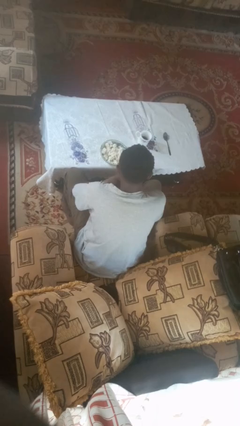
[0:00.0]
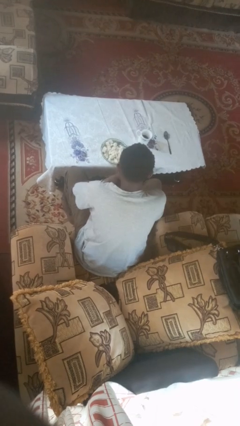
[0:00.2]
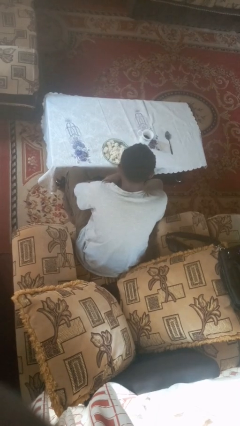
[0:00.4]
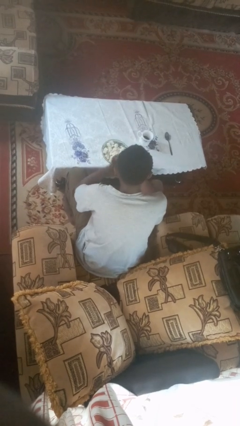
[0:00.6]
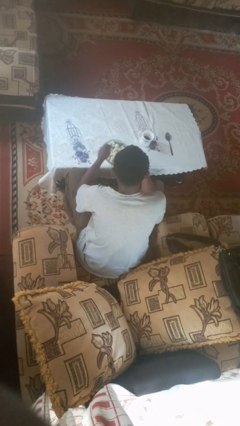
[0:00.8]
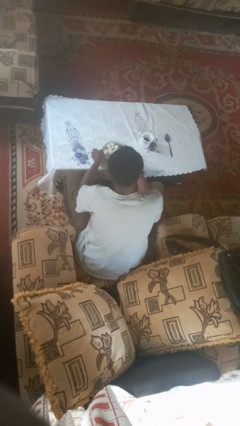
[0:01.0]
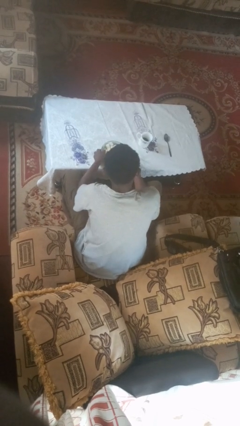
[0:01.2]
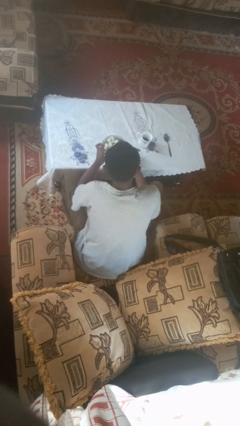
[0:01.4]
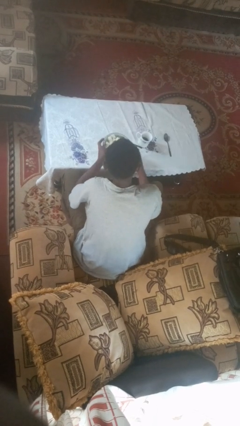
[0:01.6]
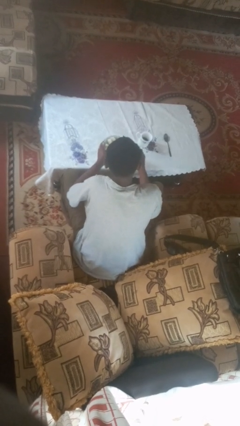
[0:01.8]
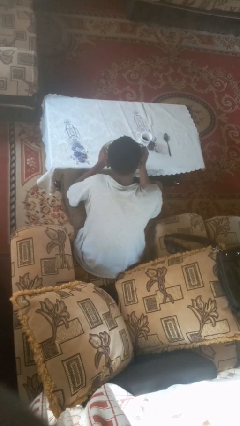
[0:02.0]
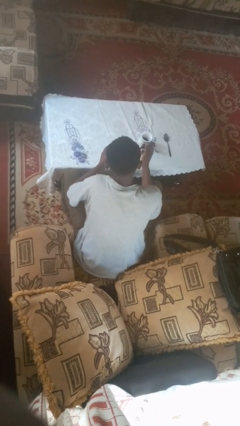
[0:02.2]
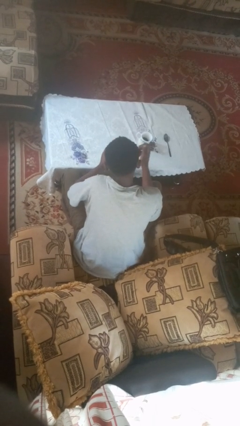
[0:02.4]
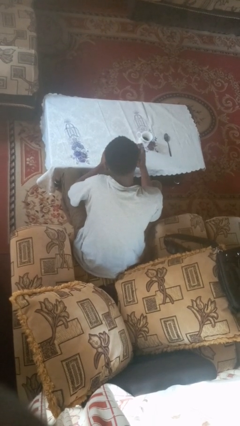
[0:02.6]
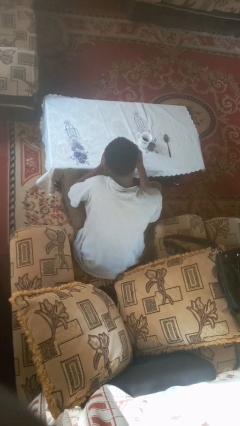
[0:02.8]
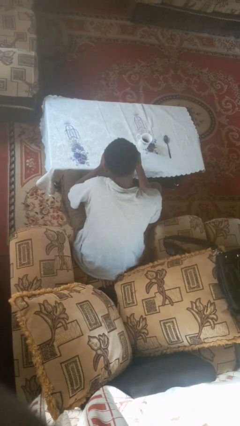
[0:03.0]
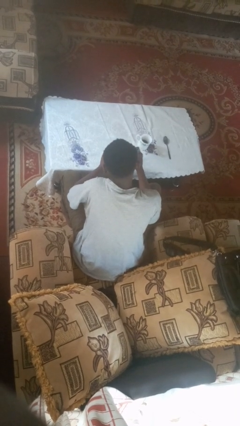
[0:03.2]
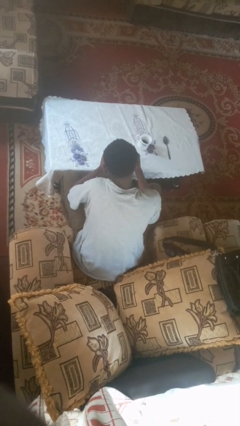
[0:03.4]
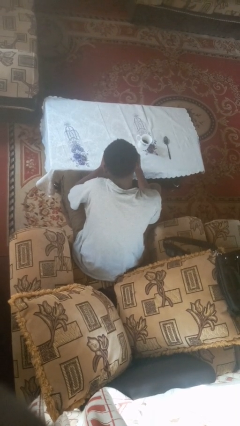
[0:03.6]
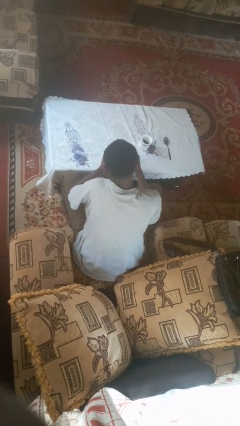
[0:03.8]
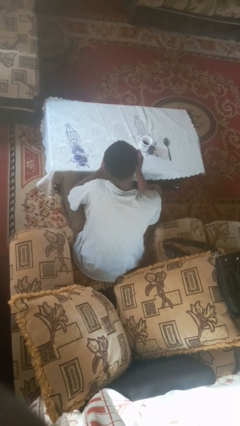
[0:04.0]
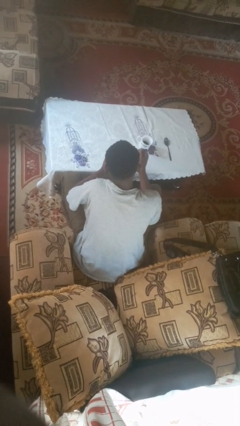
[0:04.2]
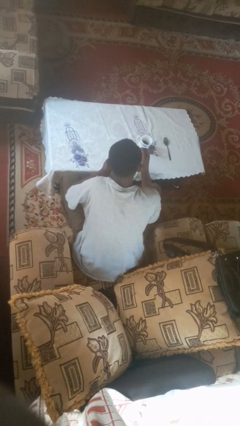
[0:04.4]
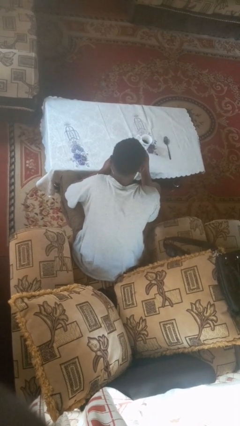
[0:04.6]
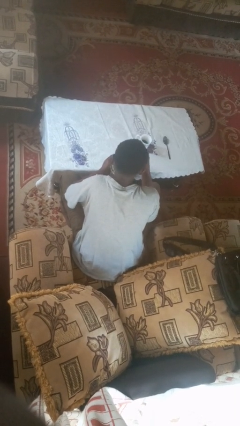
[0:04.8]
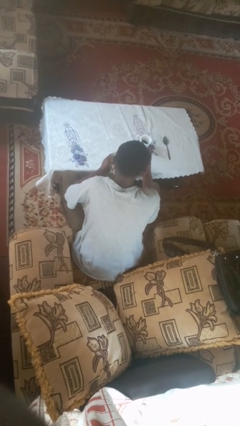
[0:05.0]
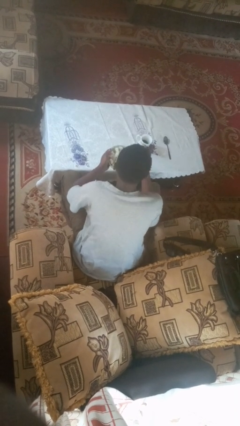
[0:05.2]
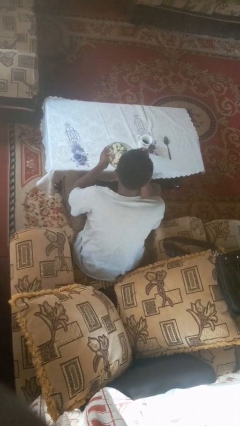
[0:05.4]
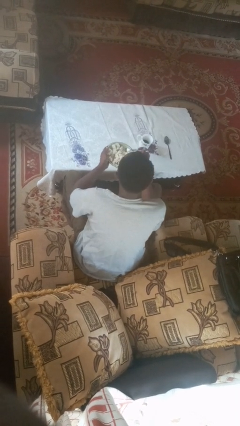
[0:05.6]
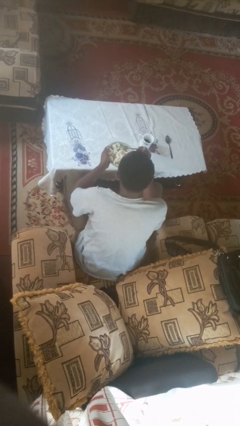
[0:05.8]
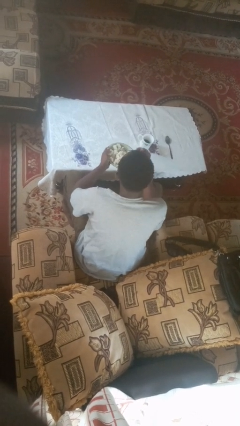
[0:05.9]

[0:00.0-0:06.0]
person eats with utensil

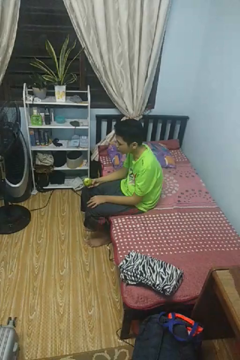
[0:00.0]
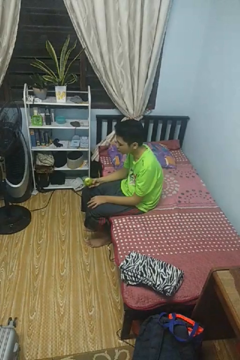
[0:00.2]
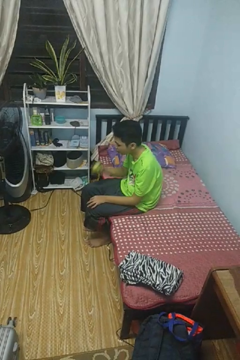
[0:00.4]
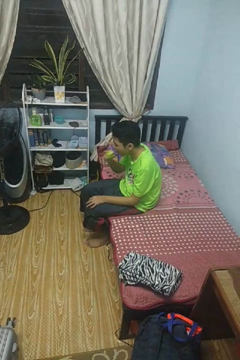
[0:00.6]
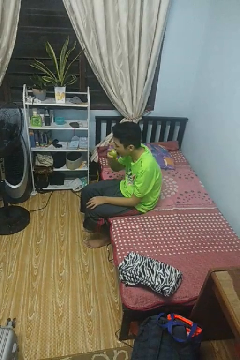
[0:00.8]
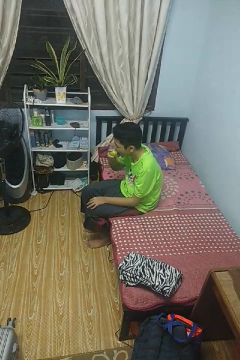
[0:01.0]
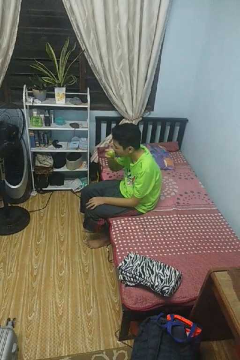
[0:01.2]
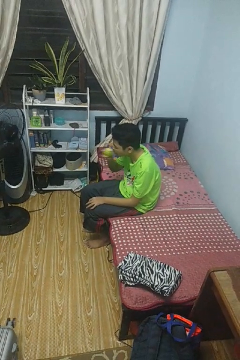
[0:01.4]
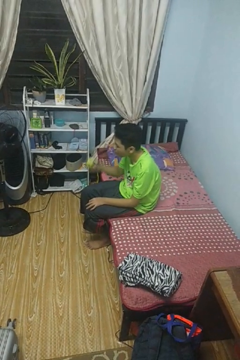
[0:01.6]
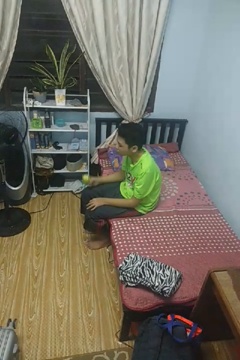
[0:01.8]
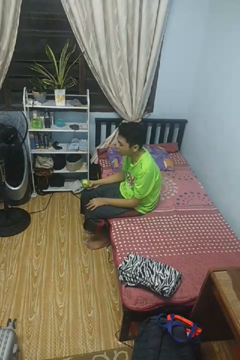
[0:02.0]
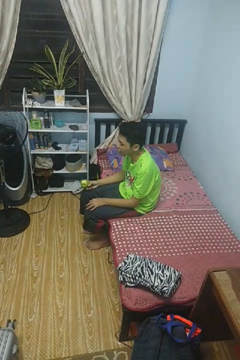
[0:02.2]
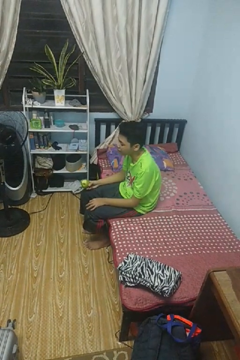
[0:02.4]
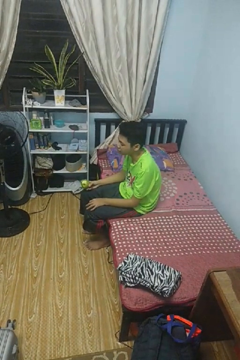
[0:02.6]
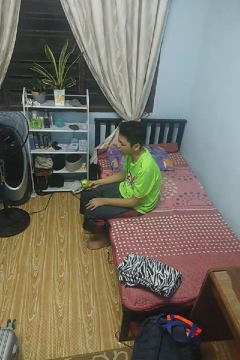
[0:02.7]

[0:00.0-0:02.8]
person eats apple

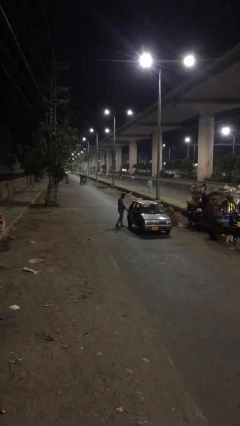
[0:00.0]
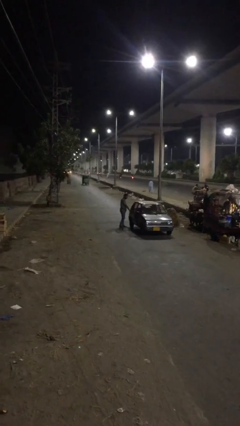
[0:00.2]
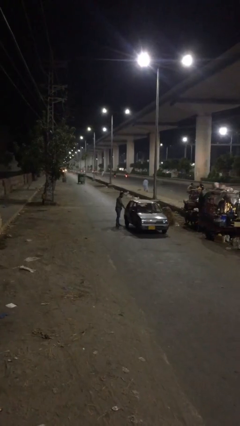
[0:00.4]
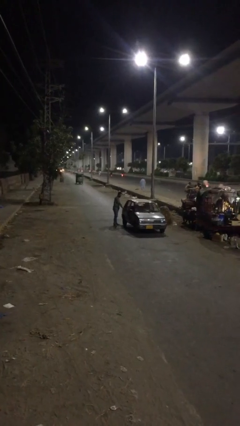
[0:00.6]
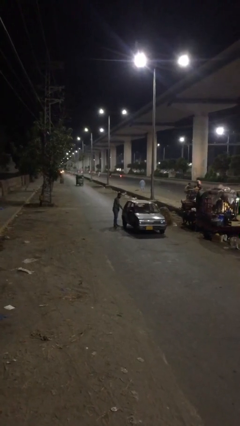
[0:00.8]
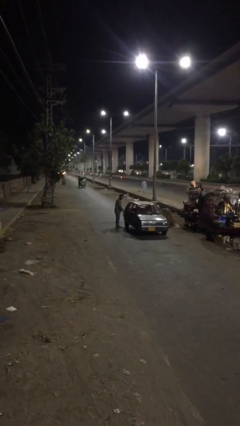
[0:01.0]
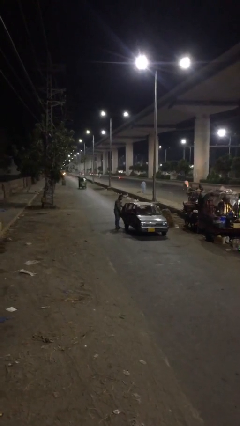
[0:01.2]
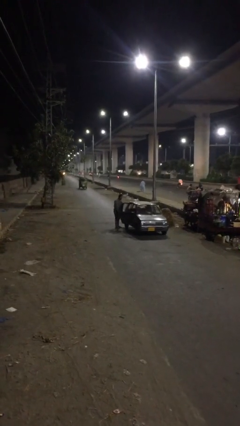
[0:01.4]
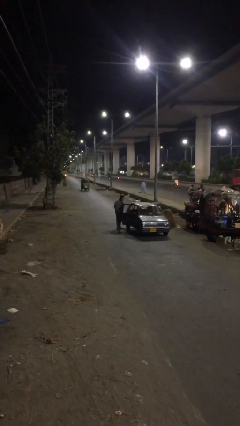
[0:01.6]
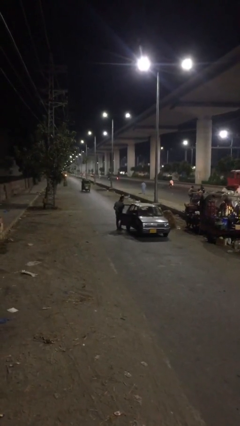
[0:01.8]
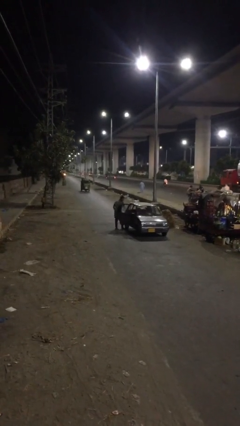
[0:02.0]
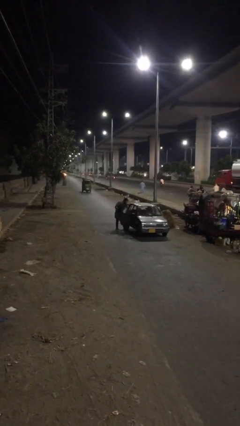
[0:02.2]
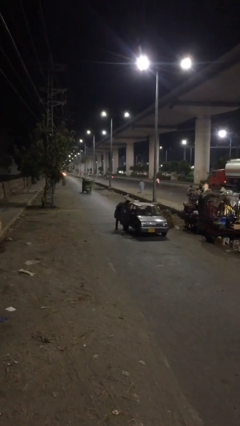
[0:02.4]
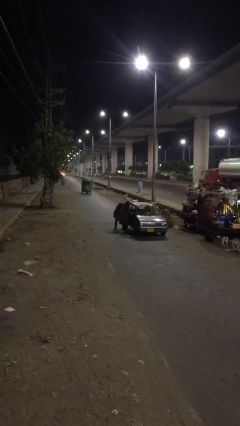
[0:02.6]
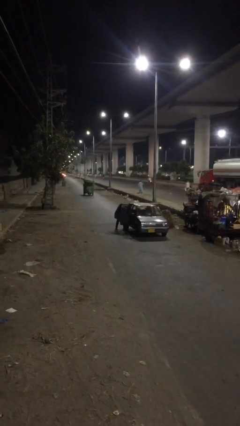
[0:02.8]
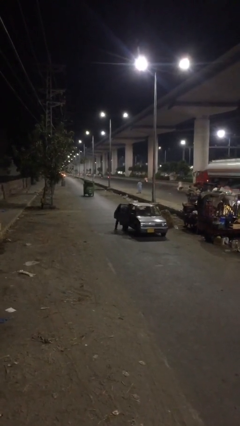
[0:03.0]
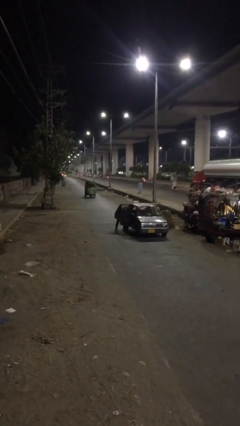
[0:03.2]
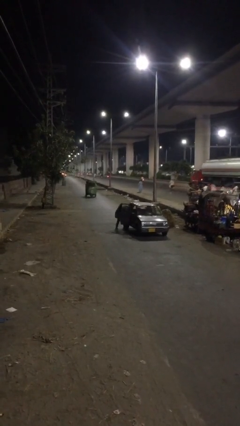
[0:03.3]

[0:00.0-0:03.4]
person opens car door

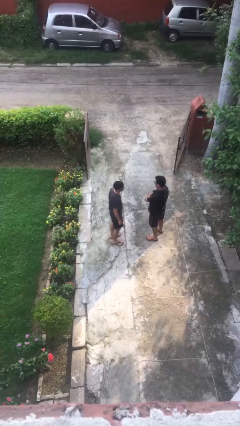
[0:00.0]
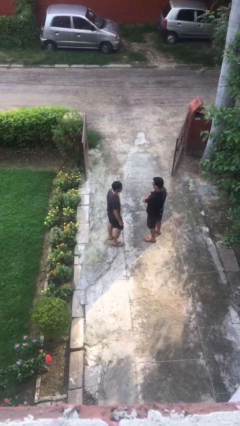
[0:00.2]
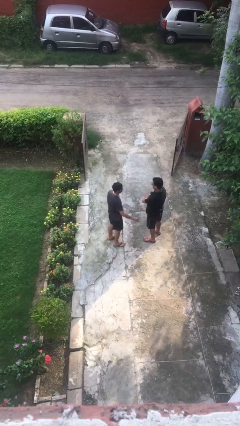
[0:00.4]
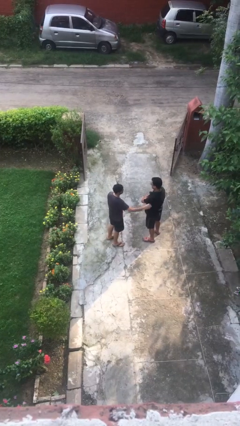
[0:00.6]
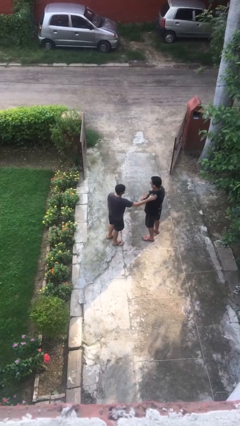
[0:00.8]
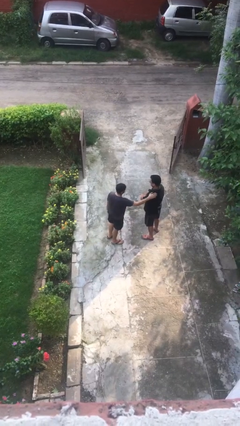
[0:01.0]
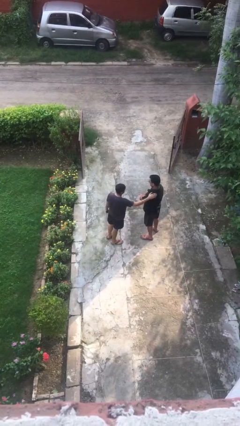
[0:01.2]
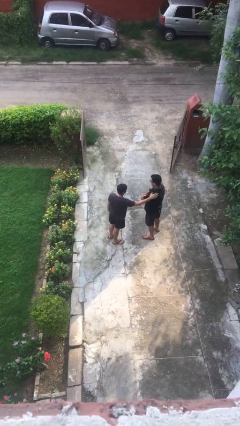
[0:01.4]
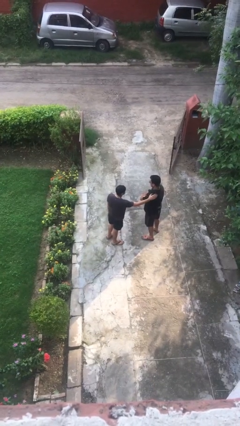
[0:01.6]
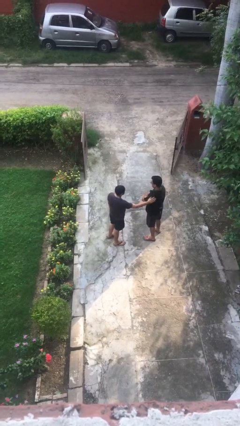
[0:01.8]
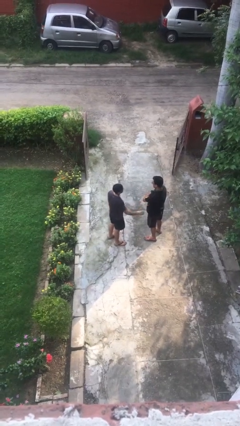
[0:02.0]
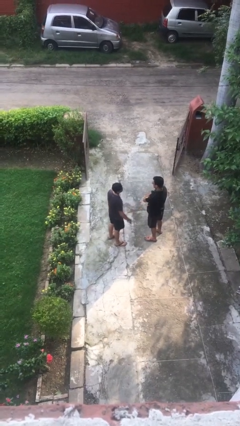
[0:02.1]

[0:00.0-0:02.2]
person pounds shoulders of person

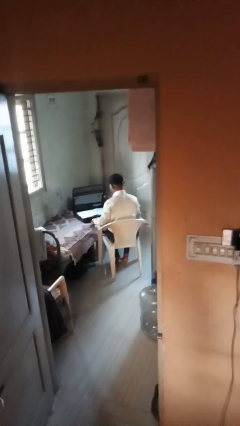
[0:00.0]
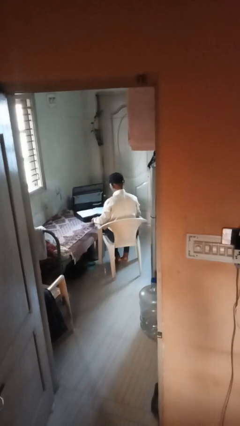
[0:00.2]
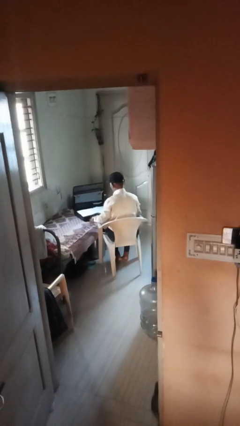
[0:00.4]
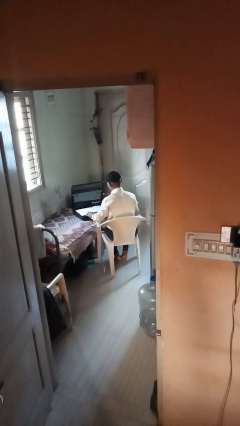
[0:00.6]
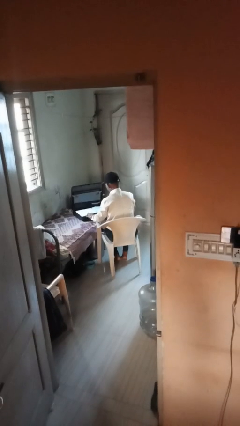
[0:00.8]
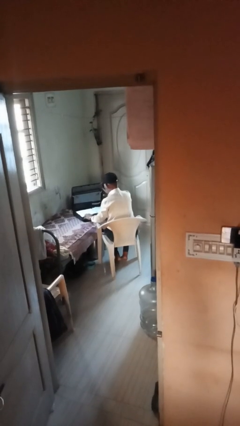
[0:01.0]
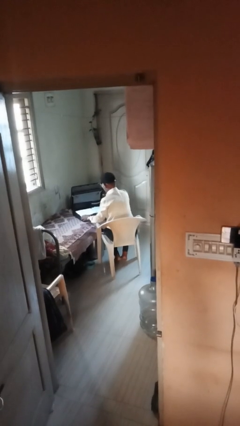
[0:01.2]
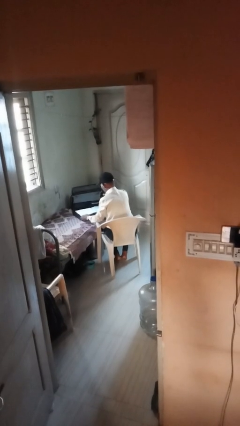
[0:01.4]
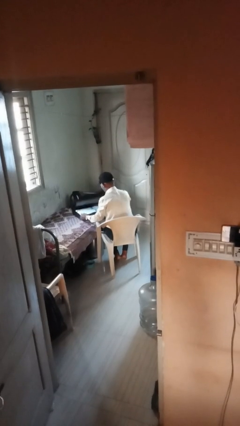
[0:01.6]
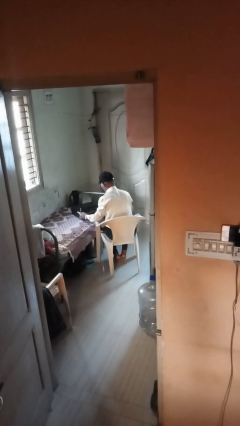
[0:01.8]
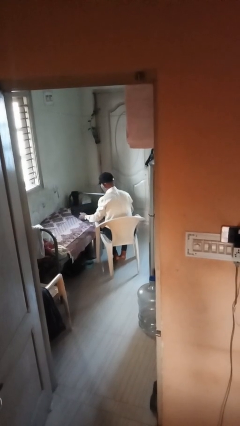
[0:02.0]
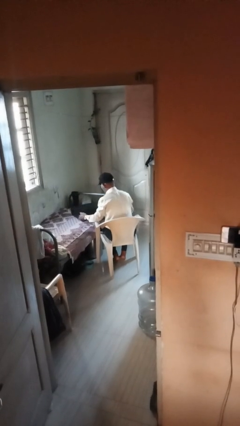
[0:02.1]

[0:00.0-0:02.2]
person closes suitcase

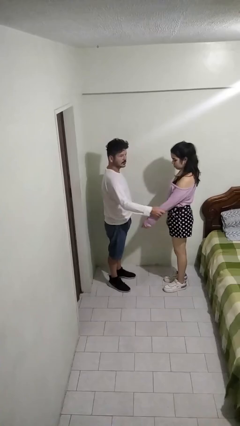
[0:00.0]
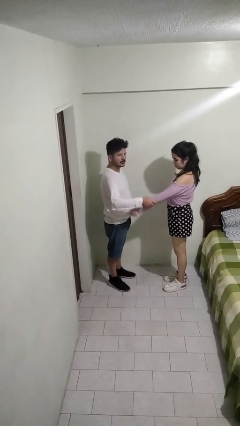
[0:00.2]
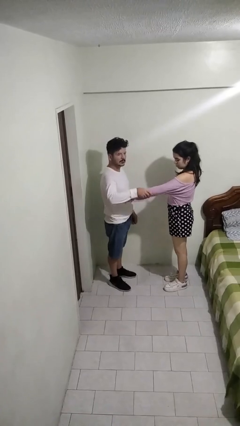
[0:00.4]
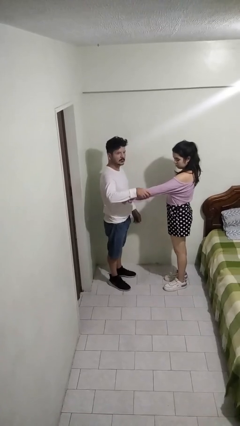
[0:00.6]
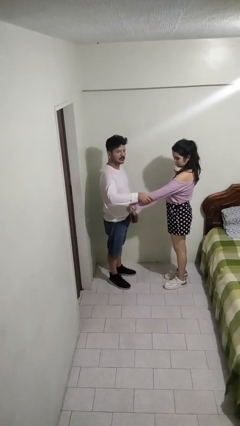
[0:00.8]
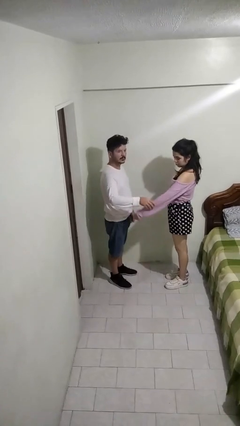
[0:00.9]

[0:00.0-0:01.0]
person grabs person by forearm
